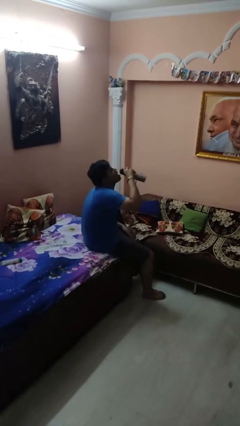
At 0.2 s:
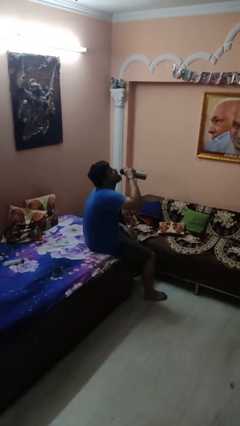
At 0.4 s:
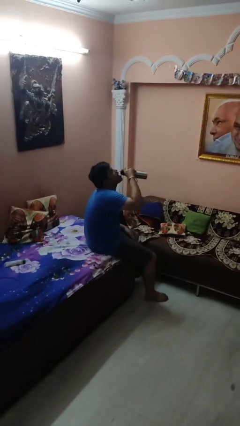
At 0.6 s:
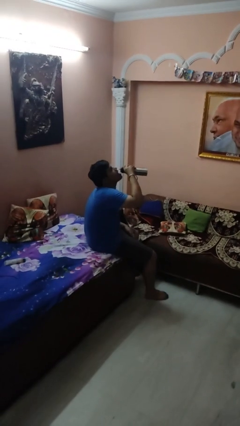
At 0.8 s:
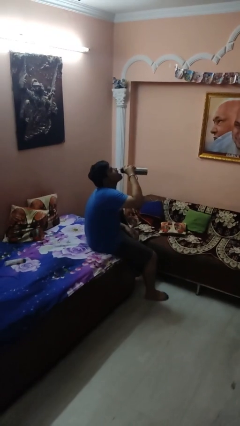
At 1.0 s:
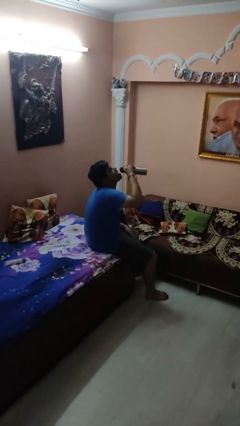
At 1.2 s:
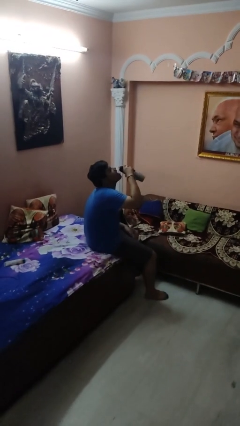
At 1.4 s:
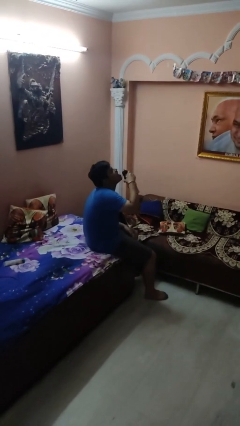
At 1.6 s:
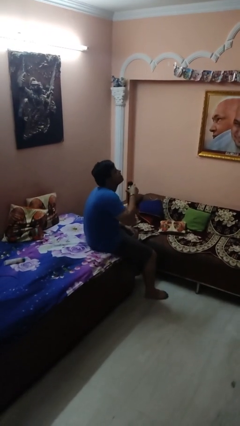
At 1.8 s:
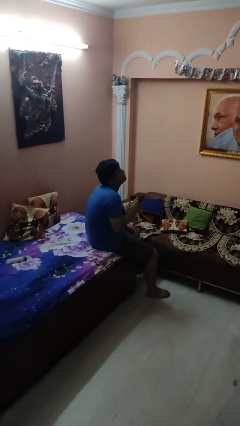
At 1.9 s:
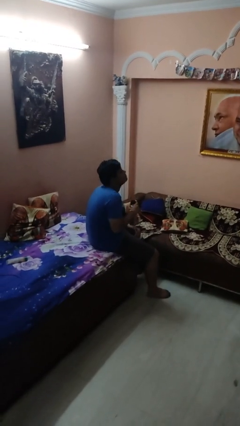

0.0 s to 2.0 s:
person drinks from bottle

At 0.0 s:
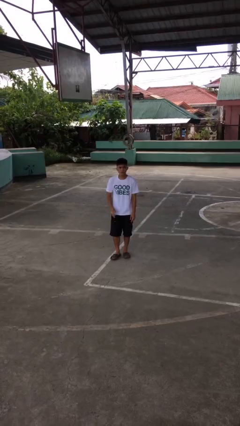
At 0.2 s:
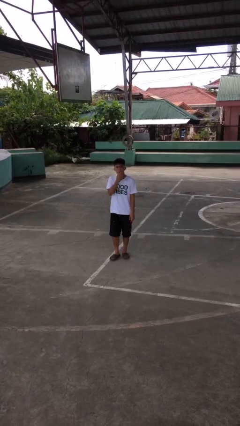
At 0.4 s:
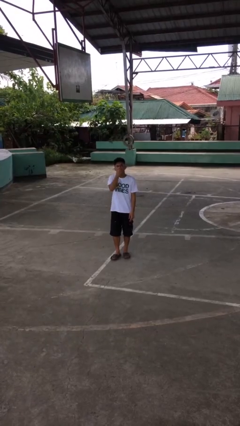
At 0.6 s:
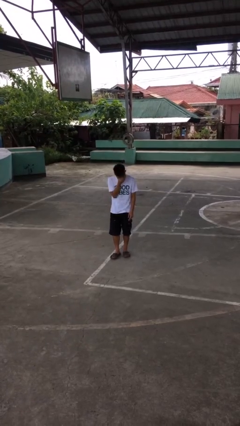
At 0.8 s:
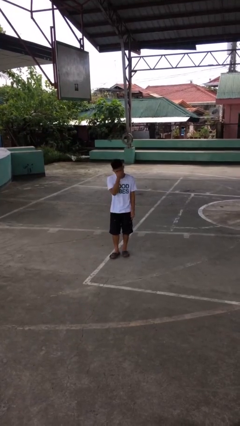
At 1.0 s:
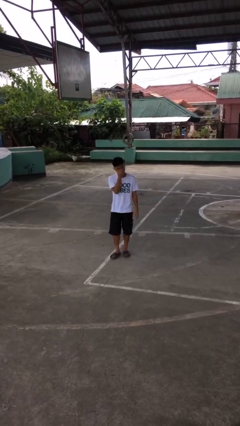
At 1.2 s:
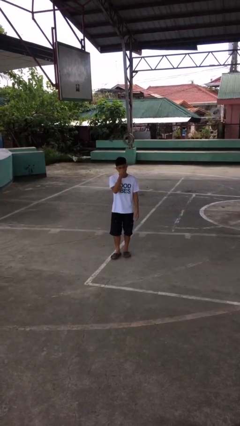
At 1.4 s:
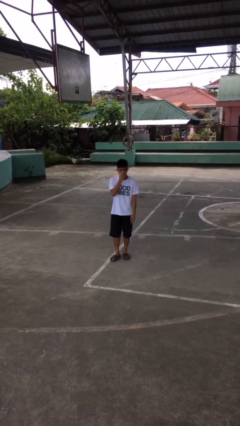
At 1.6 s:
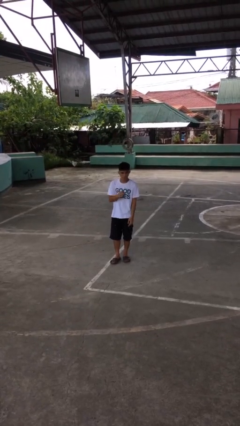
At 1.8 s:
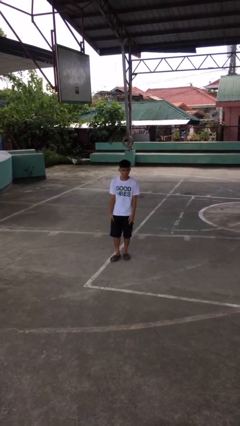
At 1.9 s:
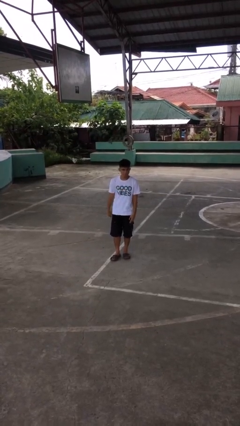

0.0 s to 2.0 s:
person sneezes into hand

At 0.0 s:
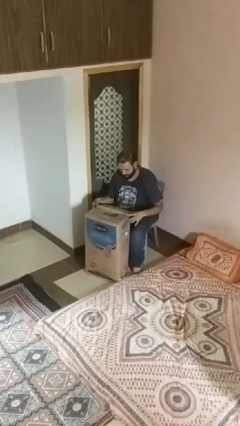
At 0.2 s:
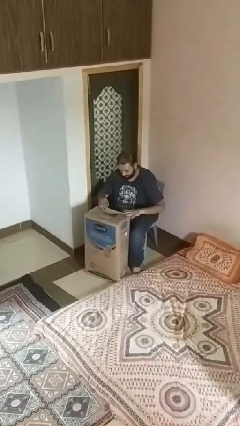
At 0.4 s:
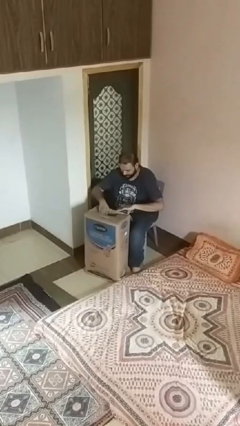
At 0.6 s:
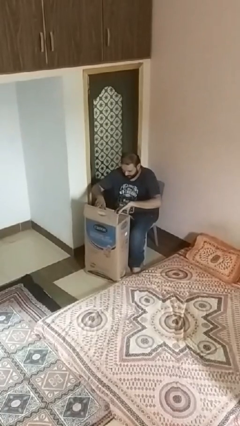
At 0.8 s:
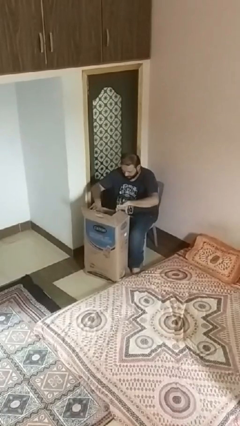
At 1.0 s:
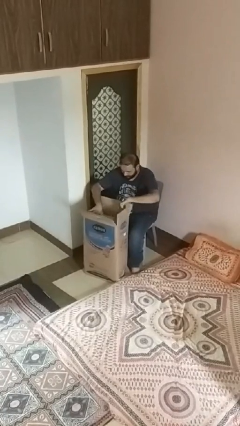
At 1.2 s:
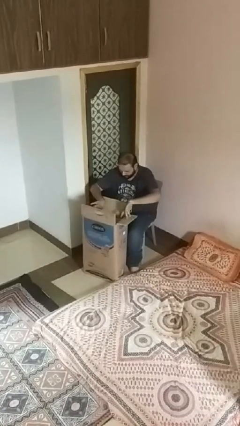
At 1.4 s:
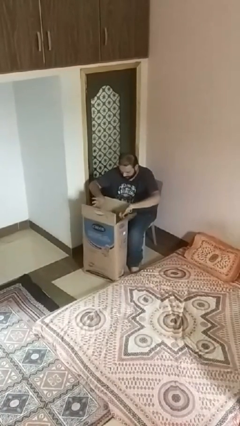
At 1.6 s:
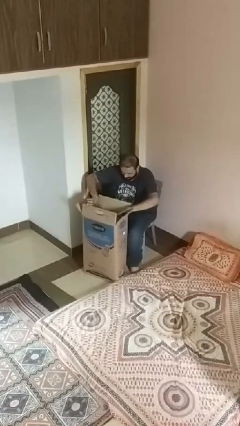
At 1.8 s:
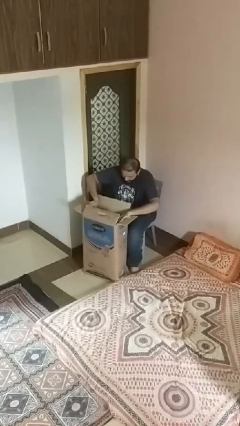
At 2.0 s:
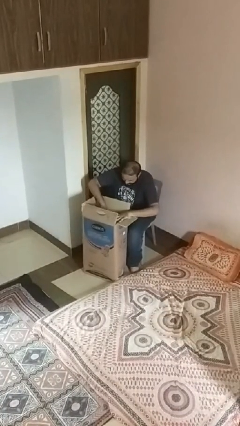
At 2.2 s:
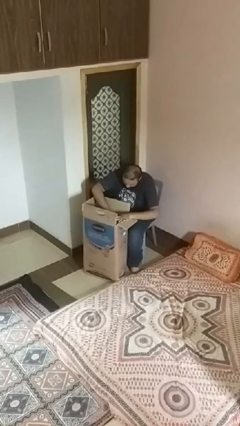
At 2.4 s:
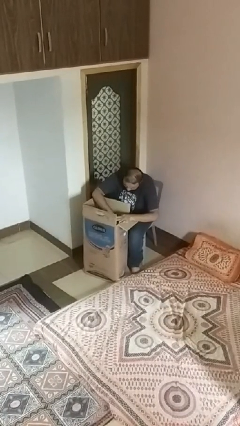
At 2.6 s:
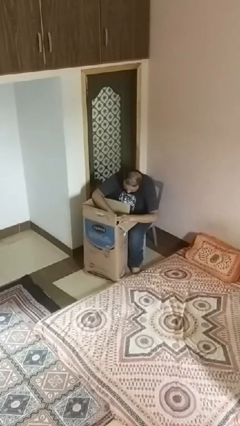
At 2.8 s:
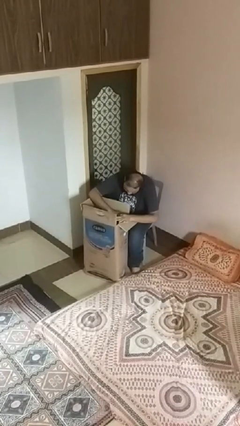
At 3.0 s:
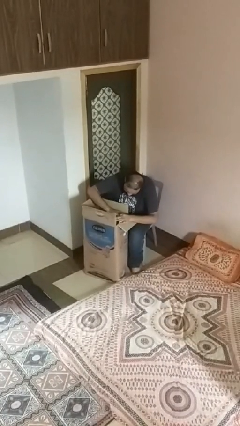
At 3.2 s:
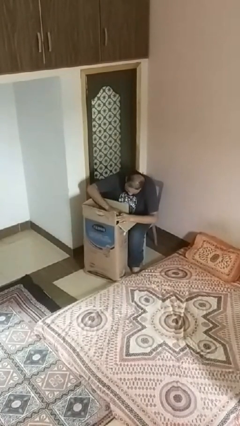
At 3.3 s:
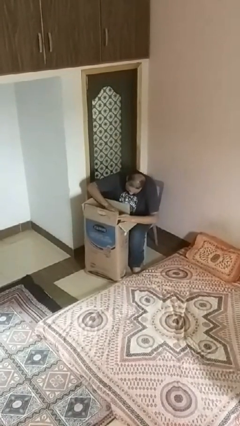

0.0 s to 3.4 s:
person searches in box

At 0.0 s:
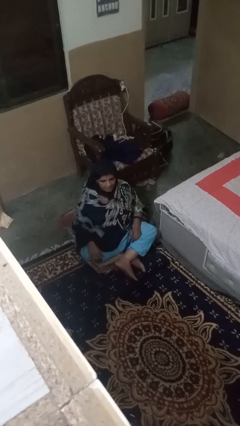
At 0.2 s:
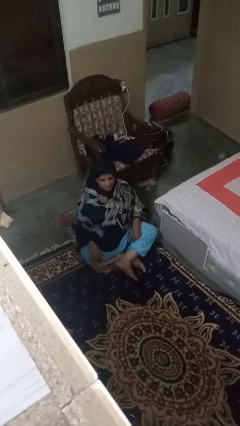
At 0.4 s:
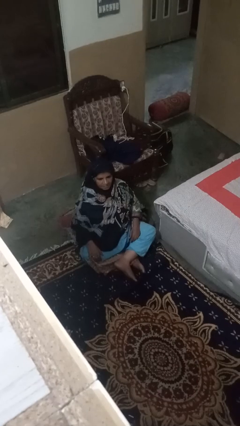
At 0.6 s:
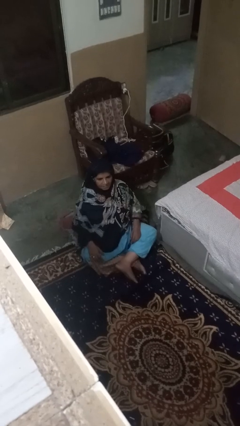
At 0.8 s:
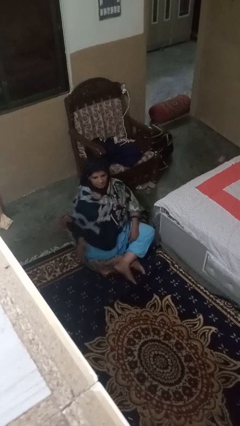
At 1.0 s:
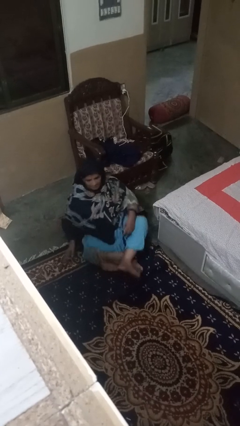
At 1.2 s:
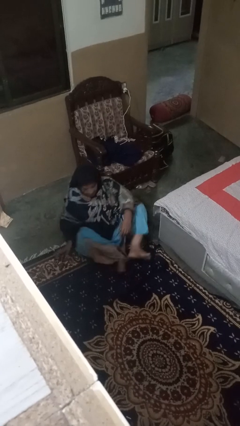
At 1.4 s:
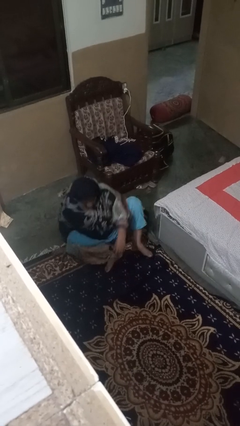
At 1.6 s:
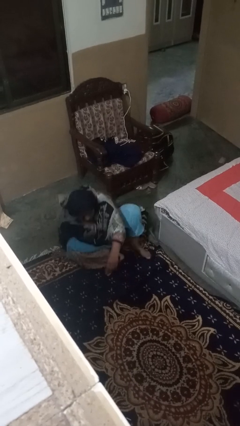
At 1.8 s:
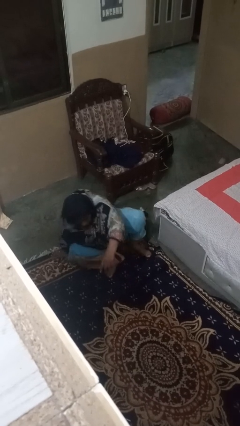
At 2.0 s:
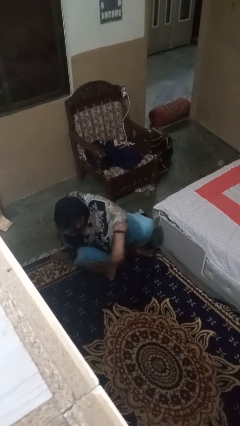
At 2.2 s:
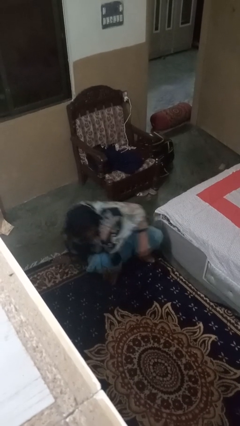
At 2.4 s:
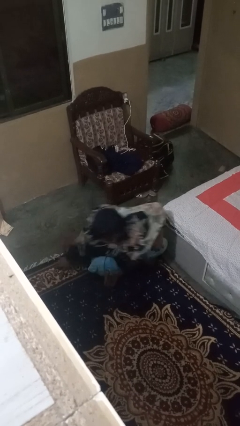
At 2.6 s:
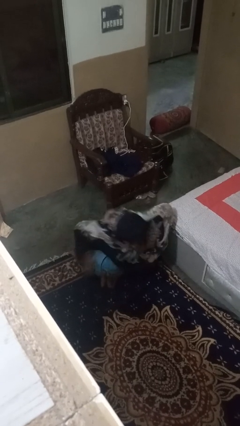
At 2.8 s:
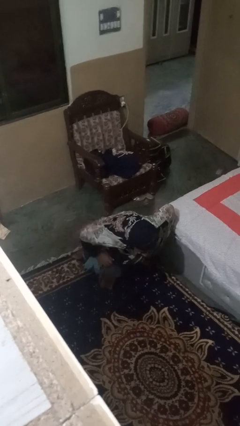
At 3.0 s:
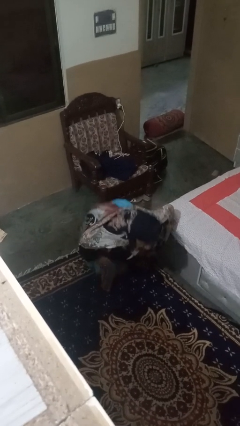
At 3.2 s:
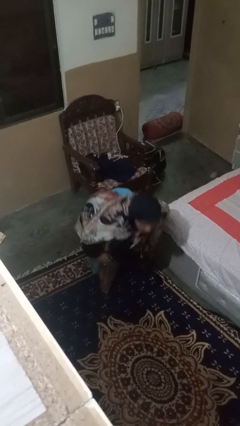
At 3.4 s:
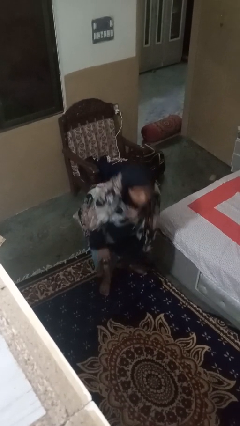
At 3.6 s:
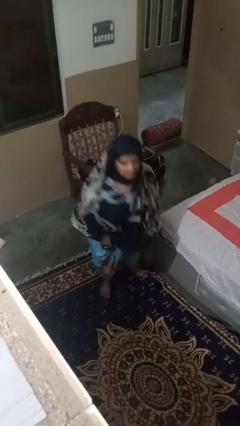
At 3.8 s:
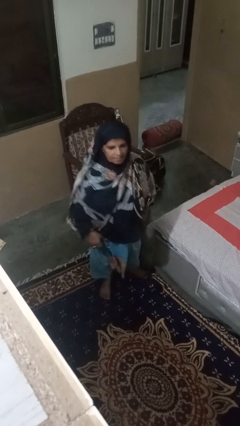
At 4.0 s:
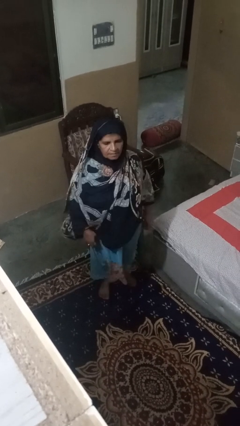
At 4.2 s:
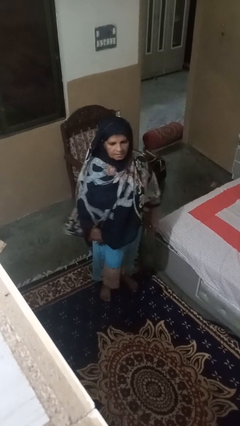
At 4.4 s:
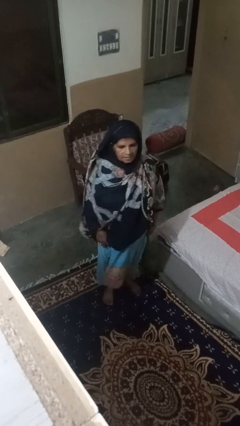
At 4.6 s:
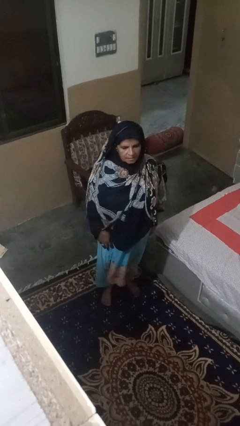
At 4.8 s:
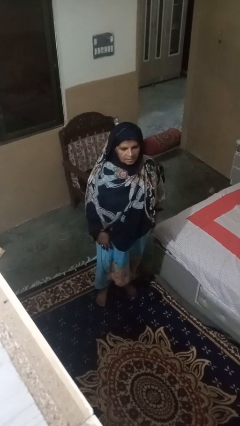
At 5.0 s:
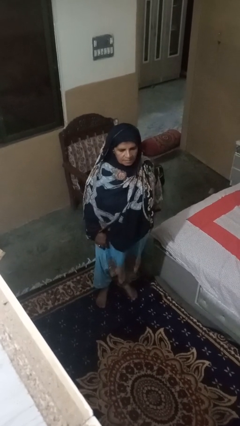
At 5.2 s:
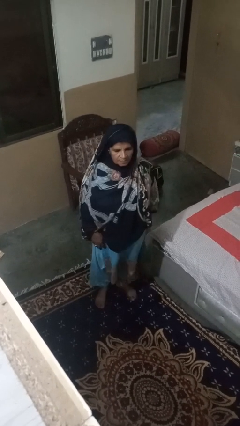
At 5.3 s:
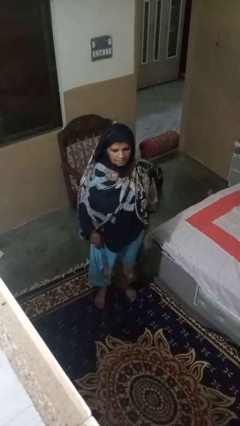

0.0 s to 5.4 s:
person stands up from floor

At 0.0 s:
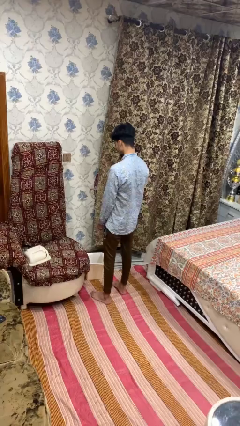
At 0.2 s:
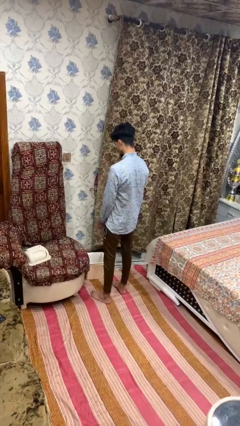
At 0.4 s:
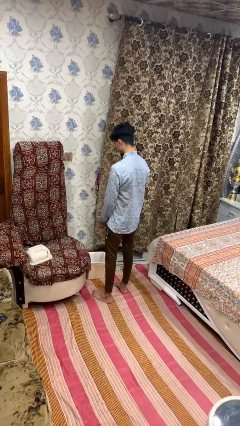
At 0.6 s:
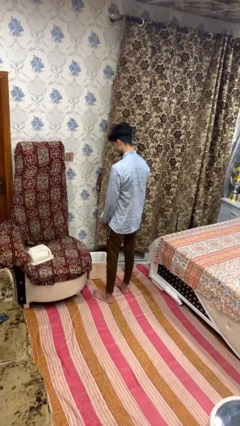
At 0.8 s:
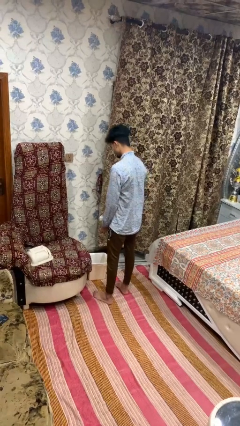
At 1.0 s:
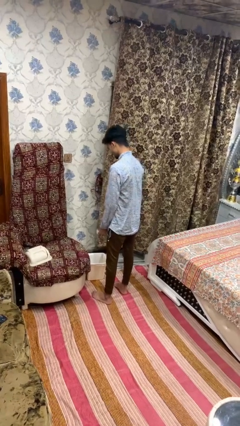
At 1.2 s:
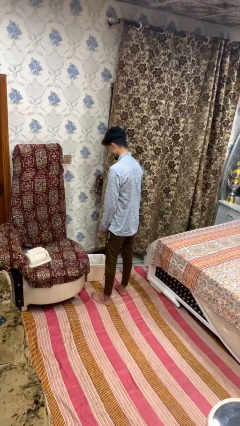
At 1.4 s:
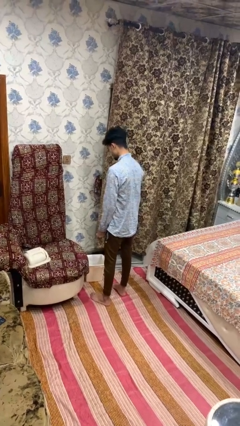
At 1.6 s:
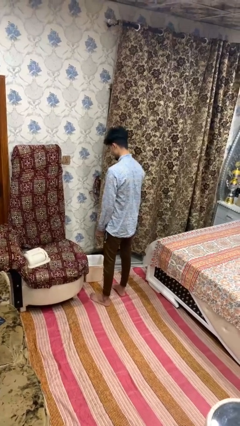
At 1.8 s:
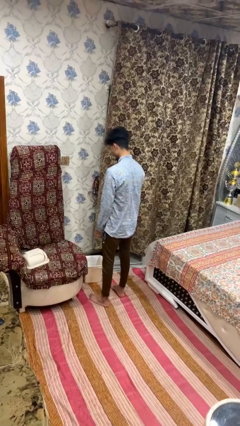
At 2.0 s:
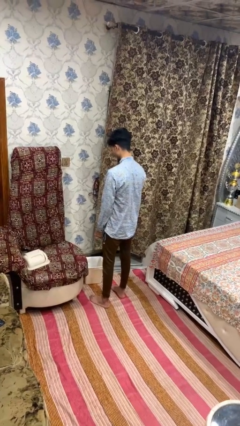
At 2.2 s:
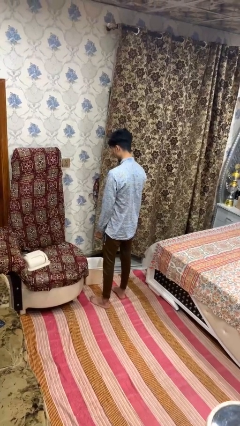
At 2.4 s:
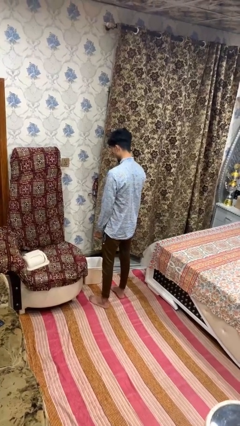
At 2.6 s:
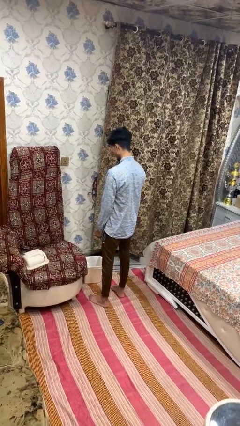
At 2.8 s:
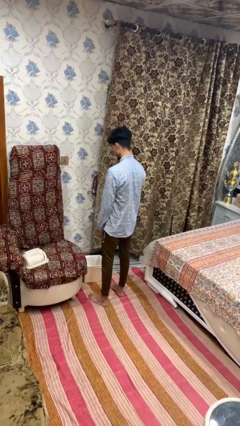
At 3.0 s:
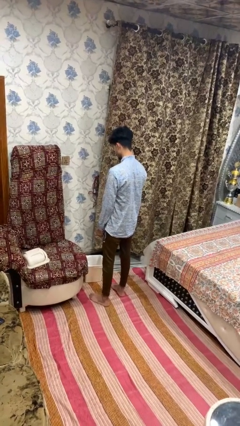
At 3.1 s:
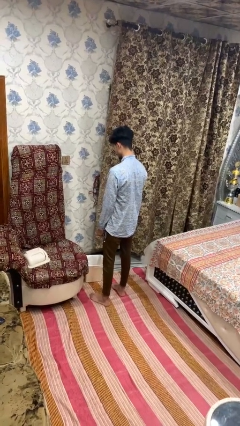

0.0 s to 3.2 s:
person discards trash

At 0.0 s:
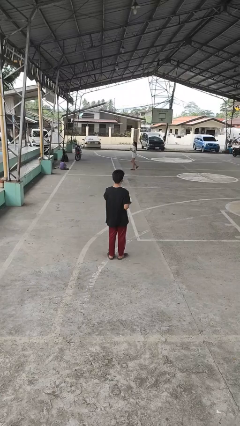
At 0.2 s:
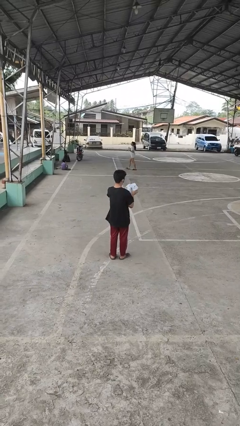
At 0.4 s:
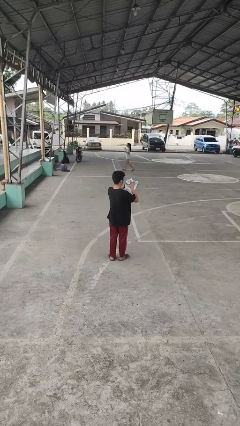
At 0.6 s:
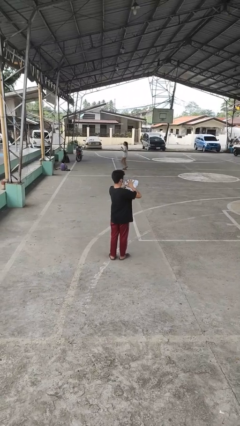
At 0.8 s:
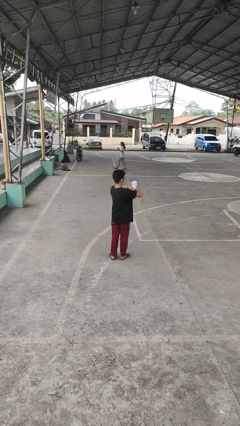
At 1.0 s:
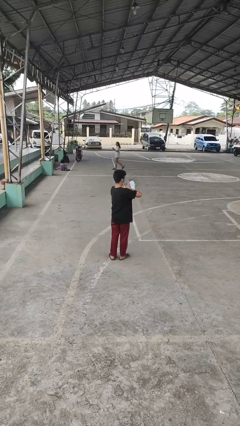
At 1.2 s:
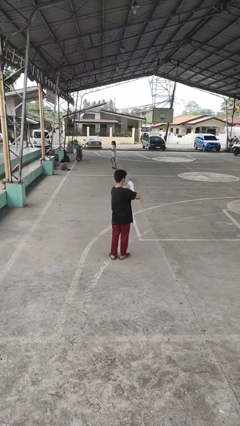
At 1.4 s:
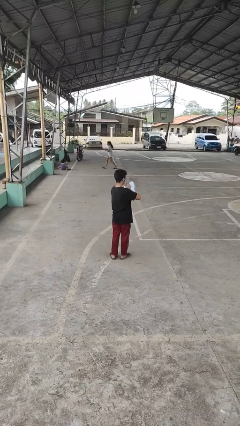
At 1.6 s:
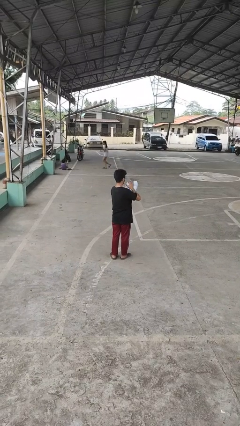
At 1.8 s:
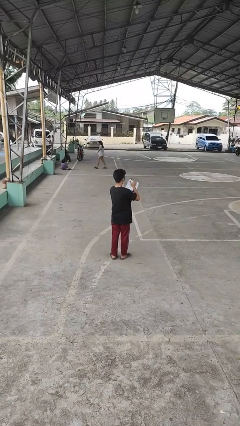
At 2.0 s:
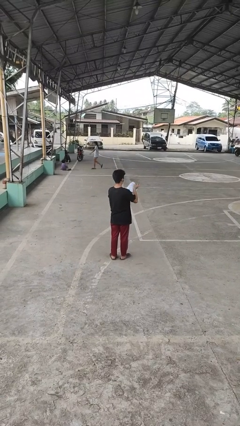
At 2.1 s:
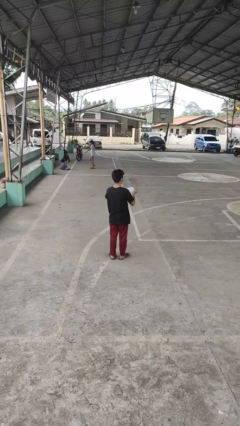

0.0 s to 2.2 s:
person squeezes object
